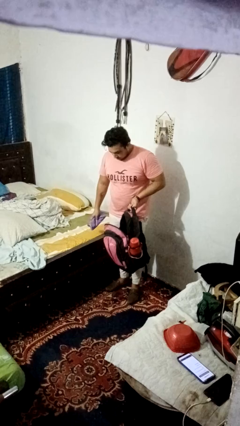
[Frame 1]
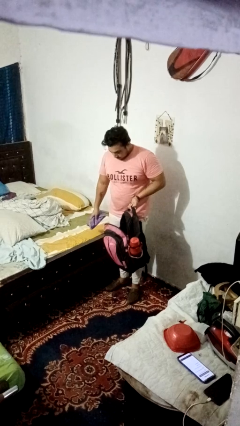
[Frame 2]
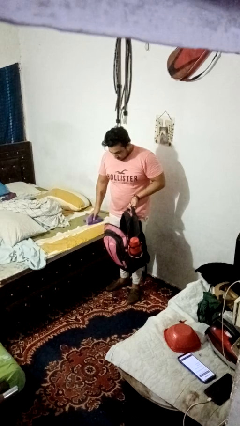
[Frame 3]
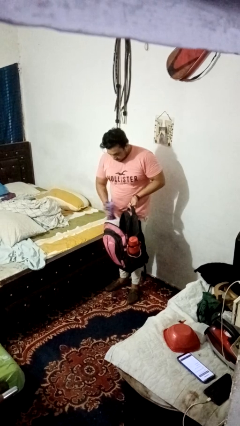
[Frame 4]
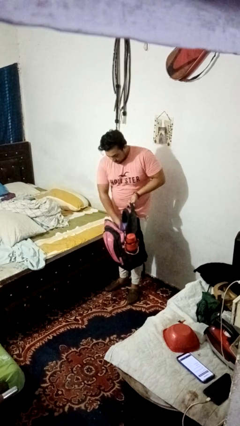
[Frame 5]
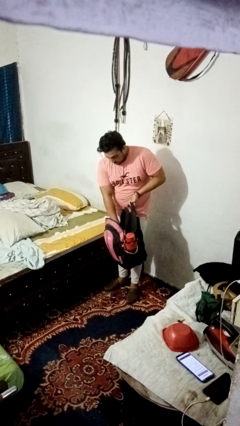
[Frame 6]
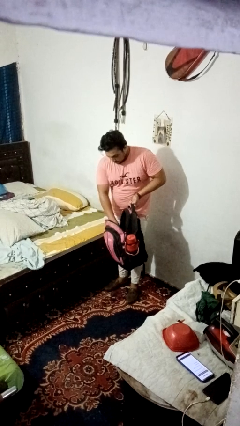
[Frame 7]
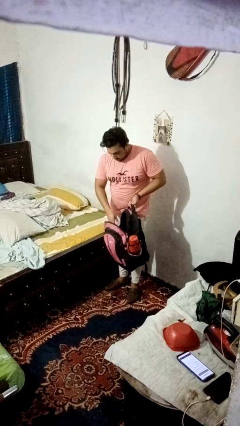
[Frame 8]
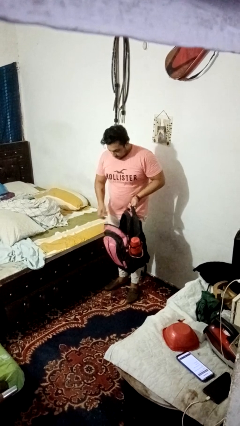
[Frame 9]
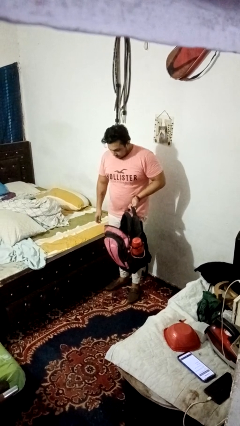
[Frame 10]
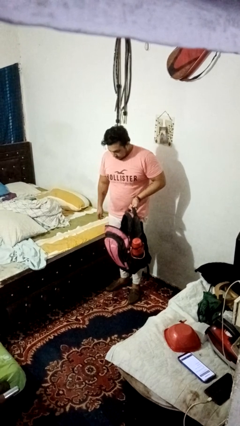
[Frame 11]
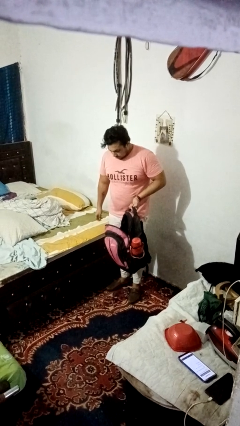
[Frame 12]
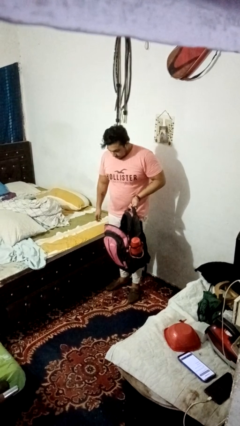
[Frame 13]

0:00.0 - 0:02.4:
person puts object into bag

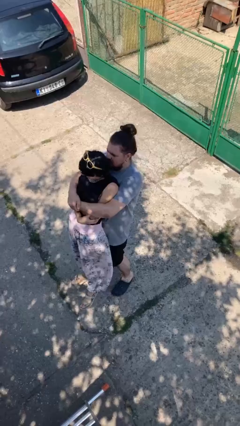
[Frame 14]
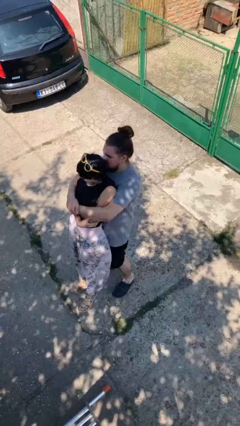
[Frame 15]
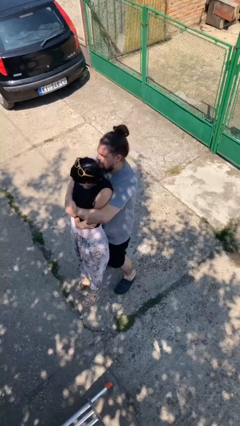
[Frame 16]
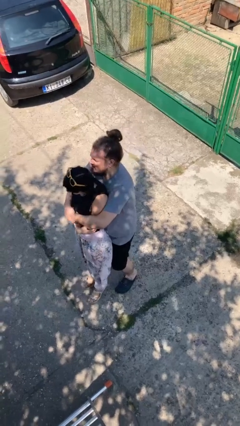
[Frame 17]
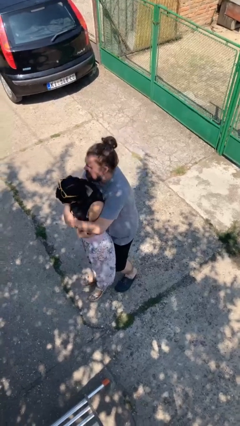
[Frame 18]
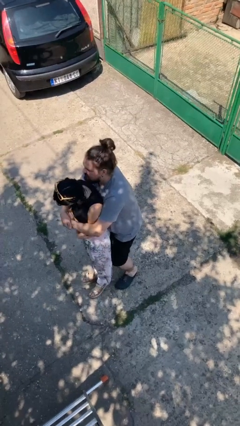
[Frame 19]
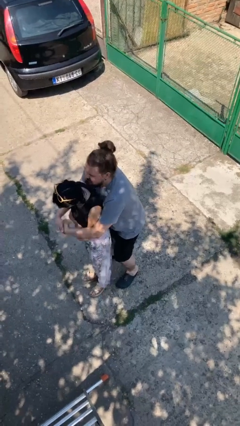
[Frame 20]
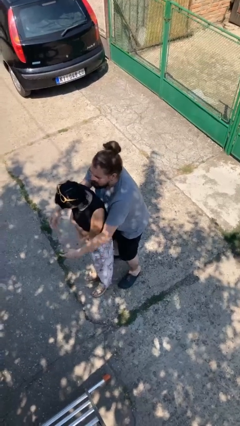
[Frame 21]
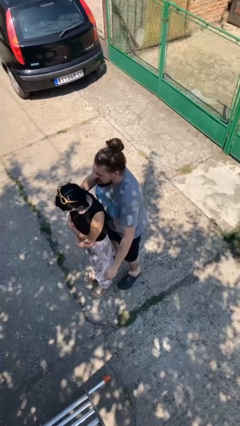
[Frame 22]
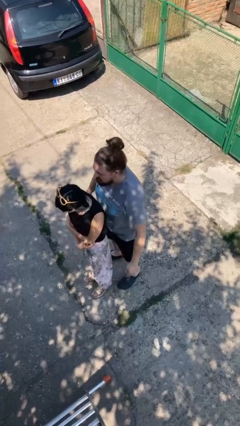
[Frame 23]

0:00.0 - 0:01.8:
person puts down person

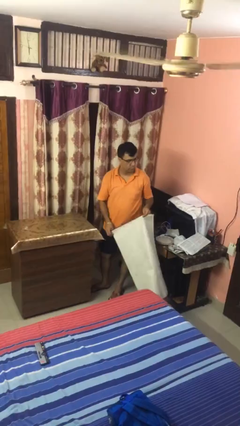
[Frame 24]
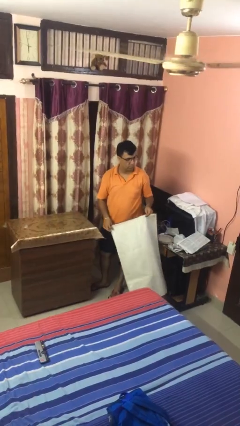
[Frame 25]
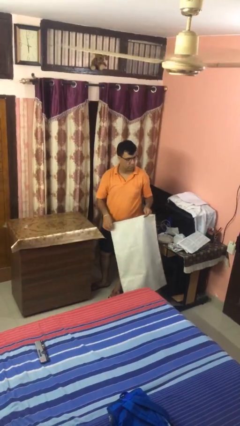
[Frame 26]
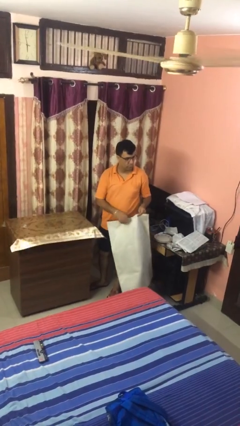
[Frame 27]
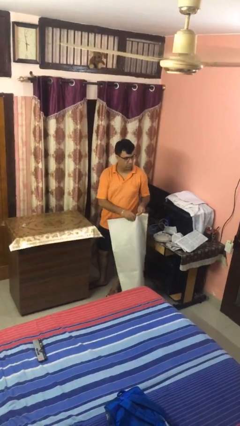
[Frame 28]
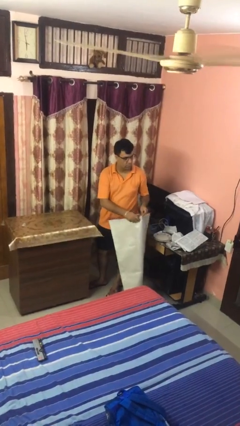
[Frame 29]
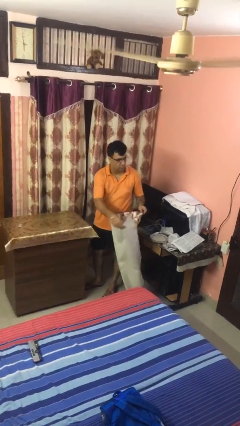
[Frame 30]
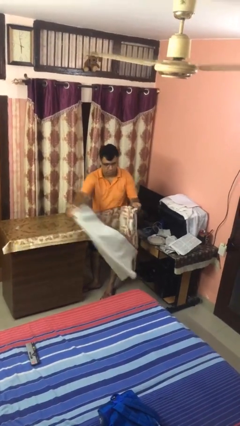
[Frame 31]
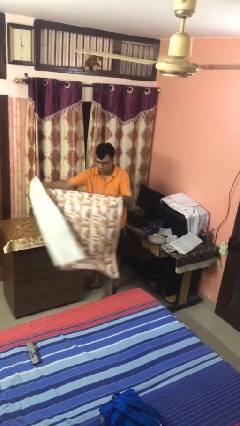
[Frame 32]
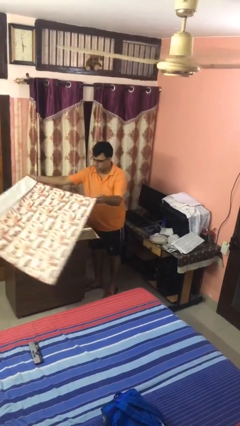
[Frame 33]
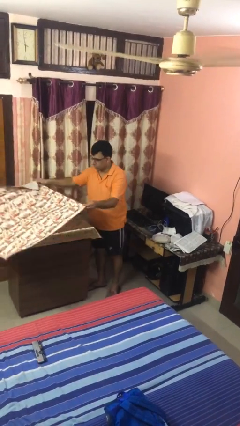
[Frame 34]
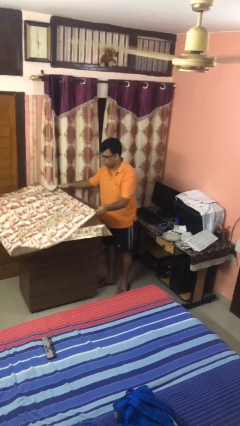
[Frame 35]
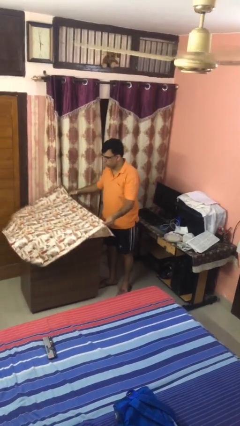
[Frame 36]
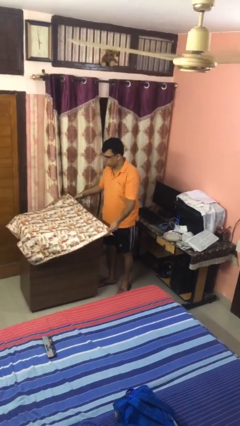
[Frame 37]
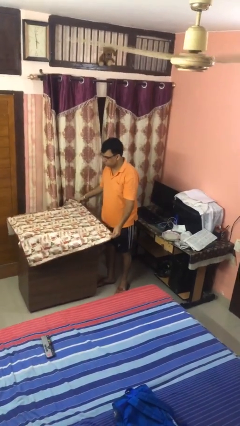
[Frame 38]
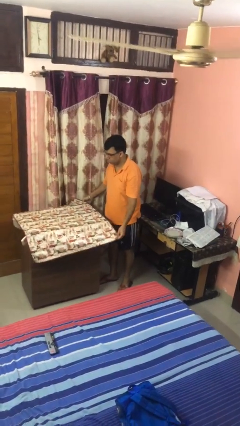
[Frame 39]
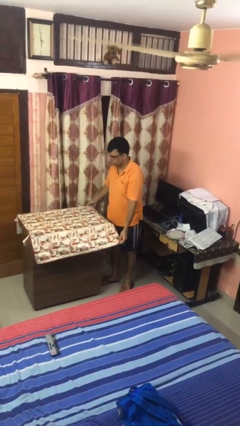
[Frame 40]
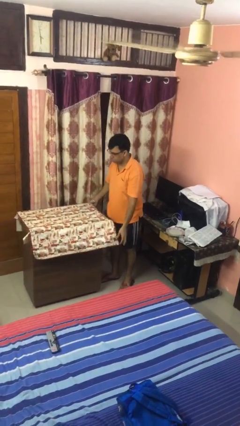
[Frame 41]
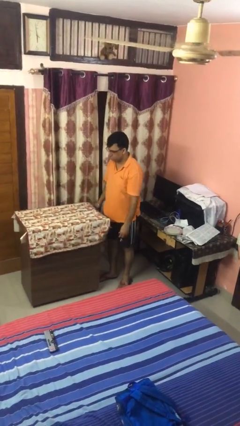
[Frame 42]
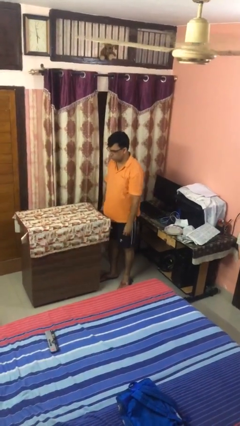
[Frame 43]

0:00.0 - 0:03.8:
person spreads tablecloth

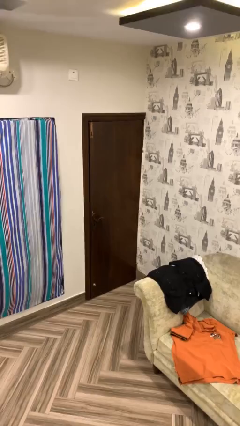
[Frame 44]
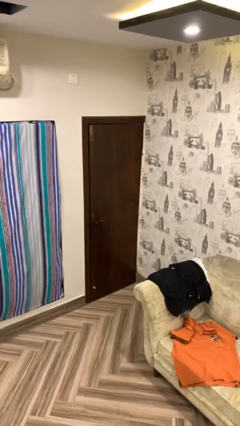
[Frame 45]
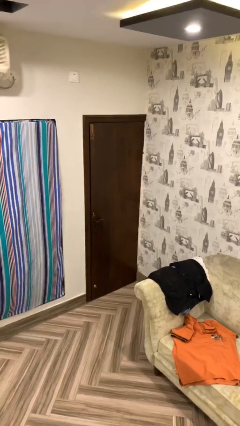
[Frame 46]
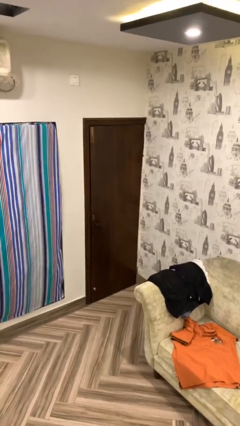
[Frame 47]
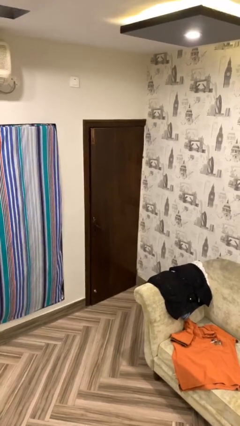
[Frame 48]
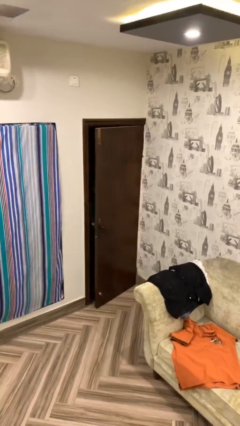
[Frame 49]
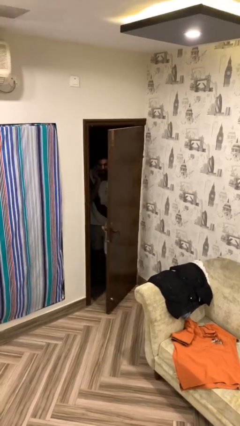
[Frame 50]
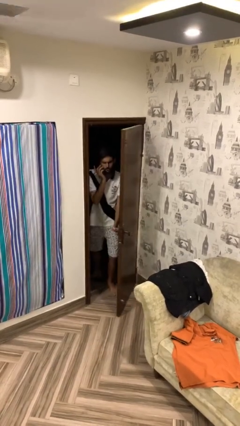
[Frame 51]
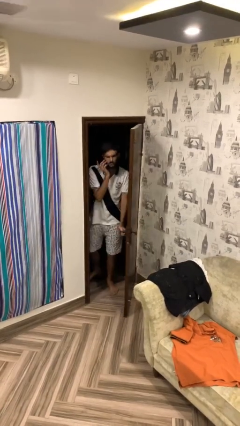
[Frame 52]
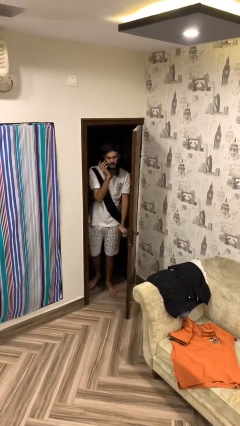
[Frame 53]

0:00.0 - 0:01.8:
person opens facility door

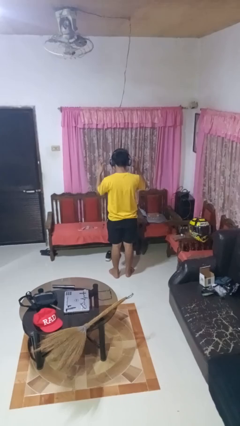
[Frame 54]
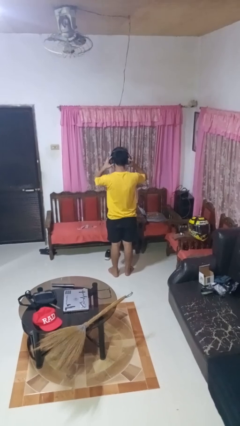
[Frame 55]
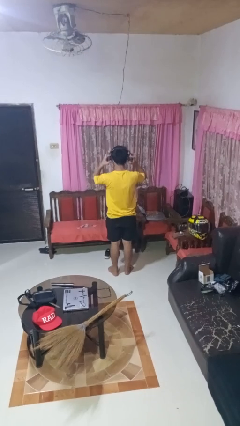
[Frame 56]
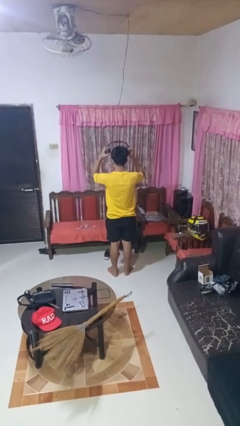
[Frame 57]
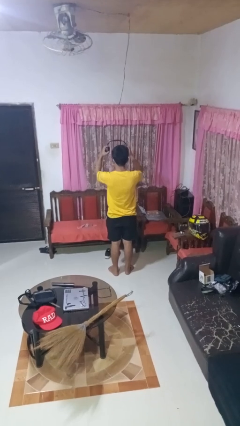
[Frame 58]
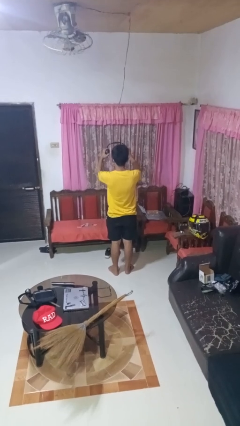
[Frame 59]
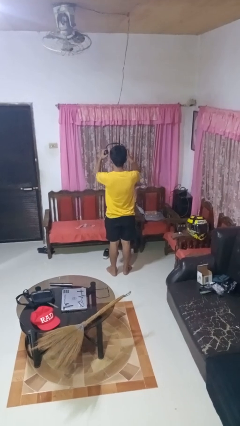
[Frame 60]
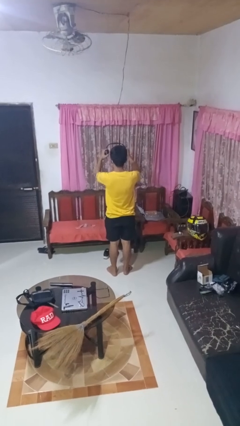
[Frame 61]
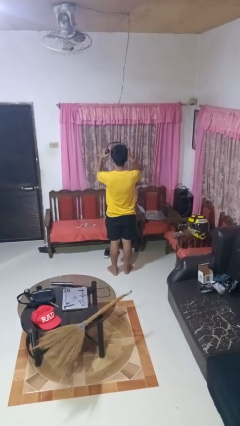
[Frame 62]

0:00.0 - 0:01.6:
person takes off headphones

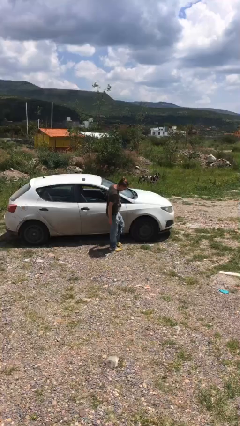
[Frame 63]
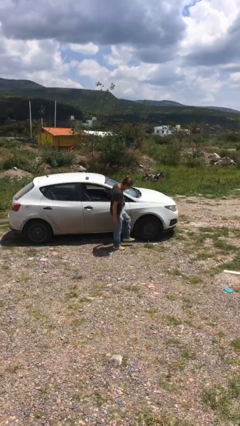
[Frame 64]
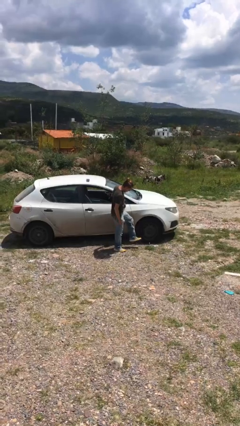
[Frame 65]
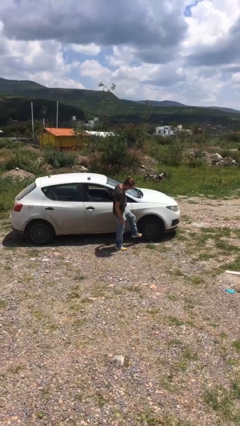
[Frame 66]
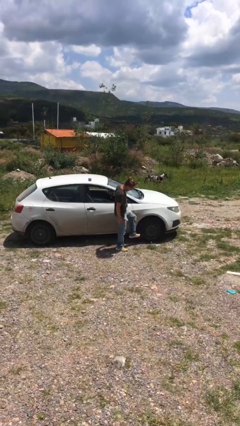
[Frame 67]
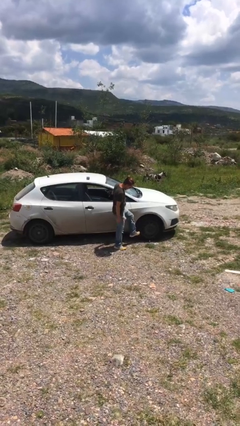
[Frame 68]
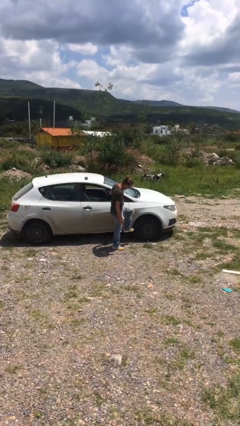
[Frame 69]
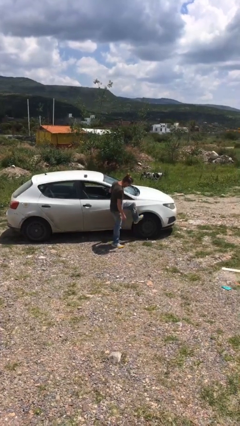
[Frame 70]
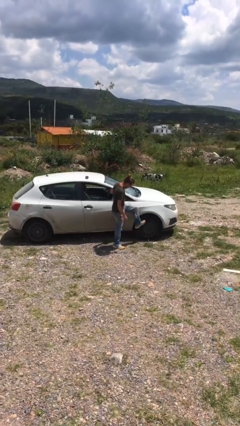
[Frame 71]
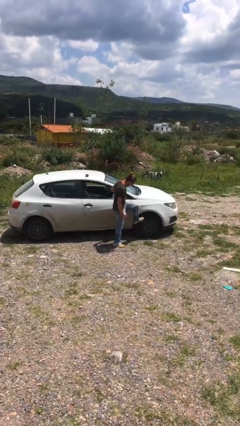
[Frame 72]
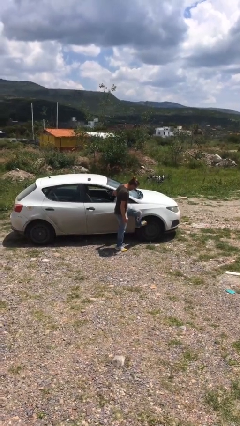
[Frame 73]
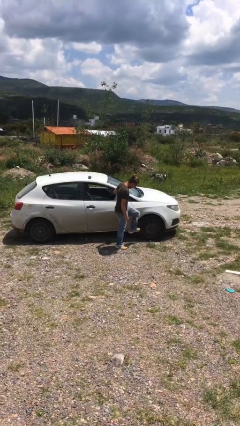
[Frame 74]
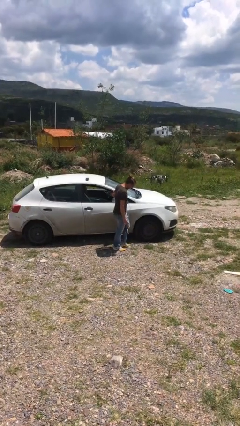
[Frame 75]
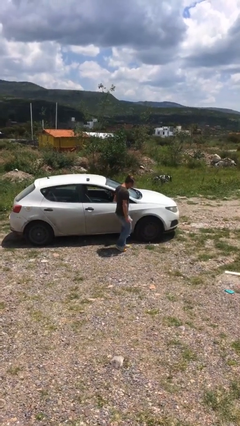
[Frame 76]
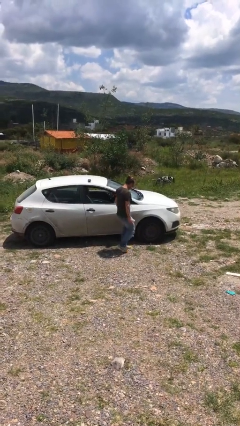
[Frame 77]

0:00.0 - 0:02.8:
person kicks car tires

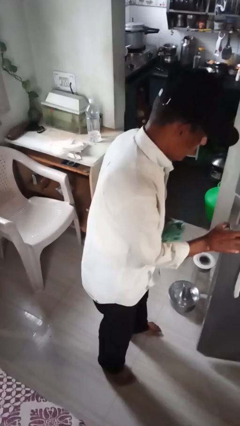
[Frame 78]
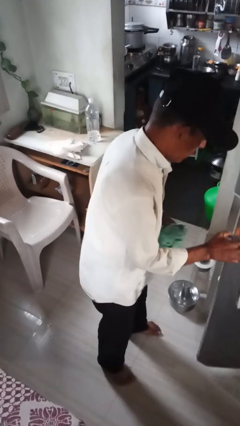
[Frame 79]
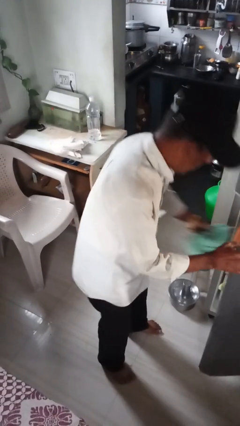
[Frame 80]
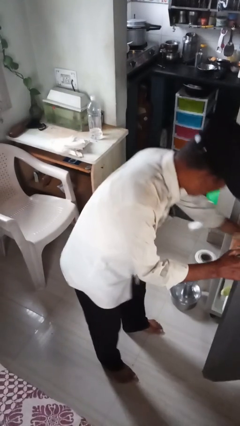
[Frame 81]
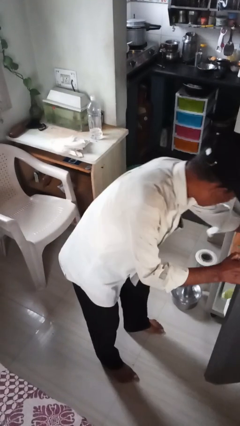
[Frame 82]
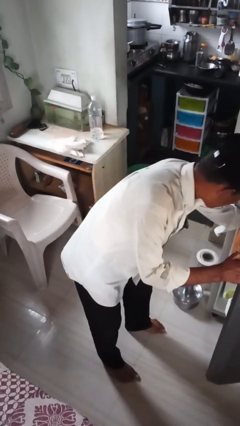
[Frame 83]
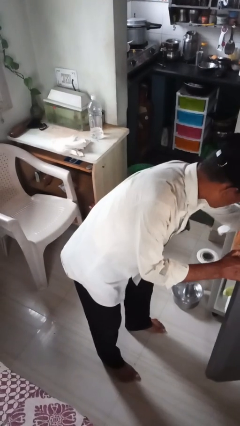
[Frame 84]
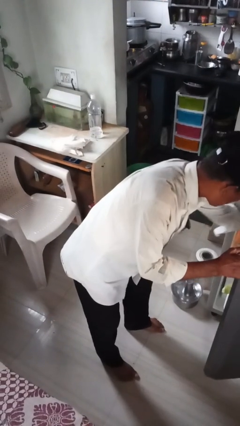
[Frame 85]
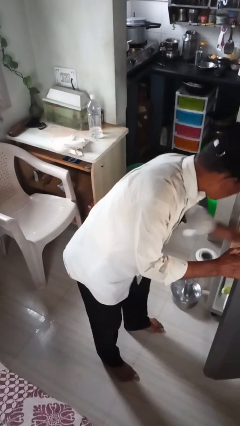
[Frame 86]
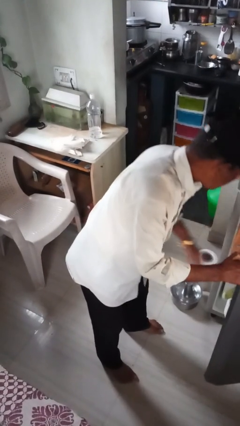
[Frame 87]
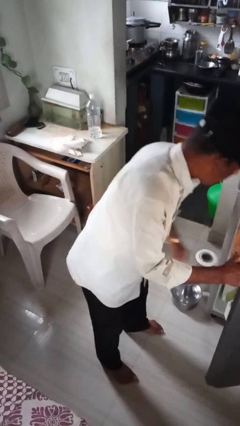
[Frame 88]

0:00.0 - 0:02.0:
person loads clotheswasher

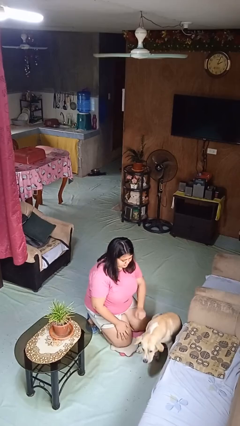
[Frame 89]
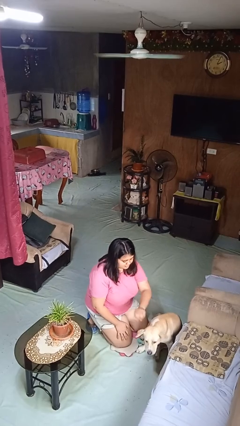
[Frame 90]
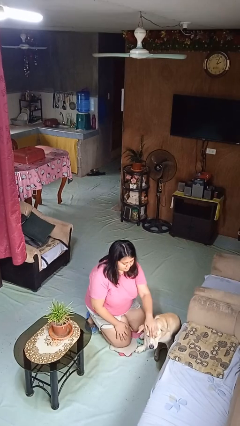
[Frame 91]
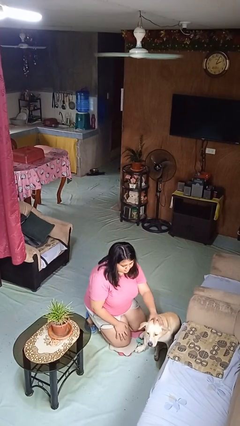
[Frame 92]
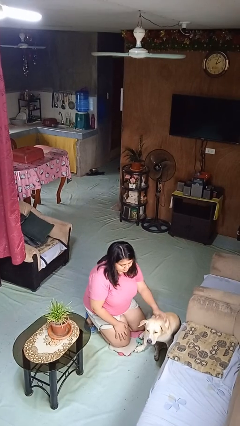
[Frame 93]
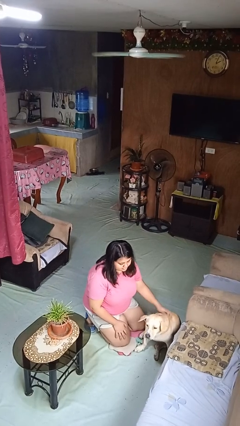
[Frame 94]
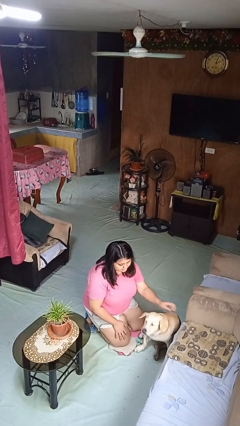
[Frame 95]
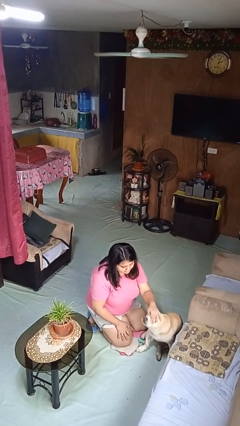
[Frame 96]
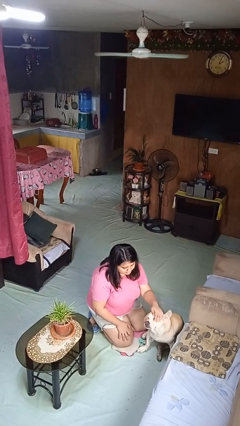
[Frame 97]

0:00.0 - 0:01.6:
person pets dog
